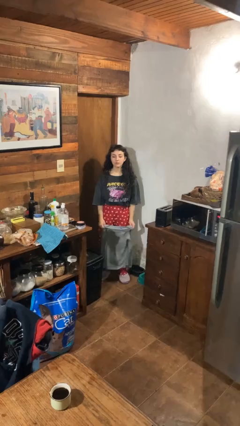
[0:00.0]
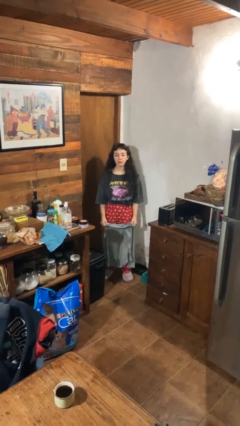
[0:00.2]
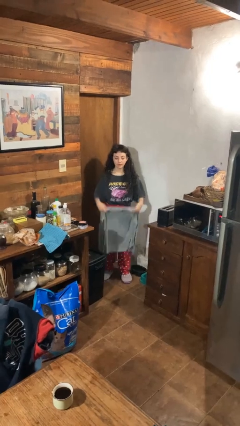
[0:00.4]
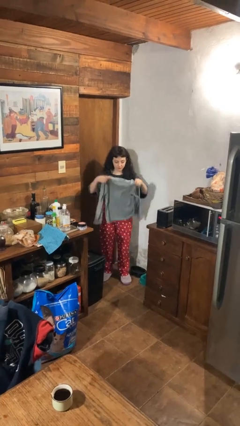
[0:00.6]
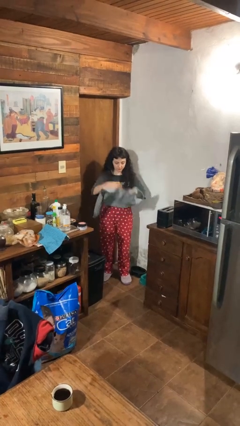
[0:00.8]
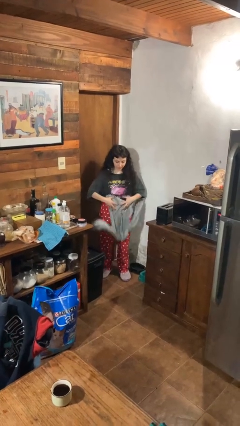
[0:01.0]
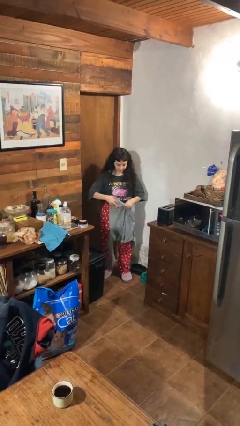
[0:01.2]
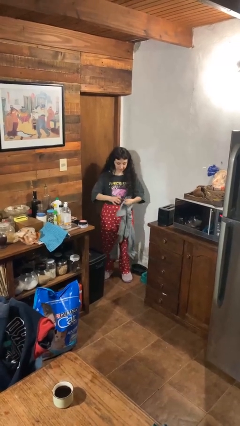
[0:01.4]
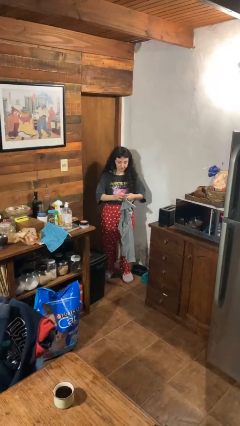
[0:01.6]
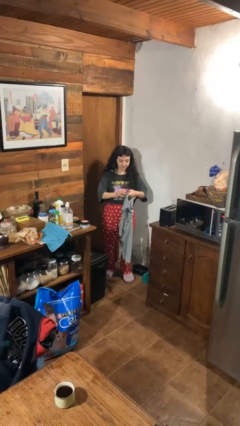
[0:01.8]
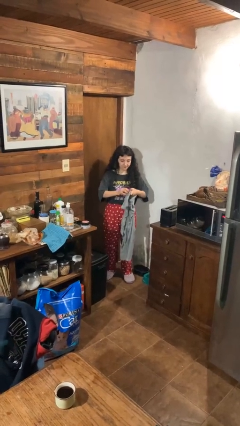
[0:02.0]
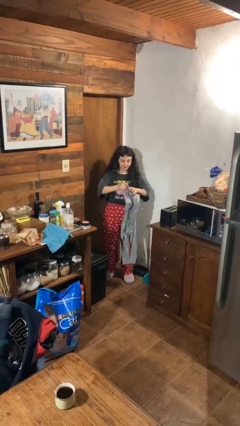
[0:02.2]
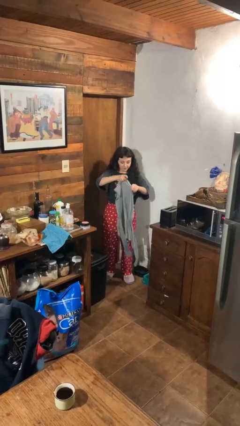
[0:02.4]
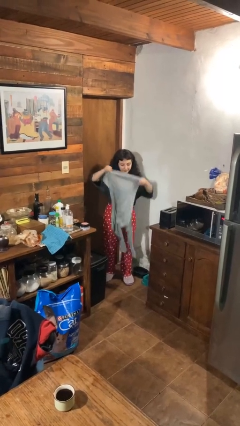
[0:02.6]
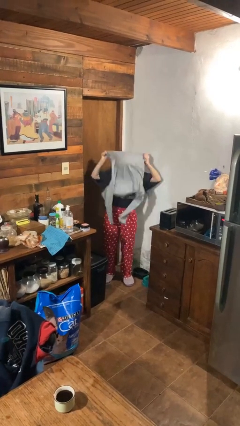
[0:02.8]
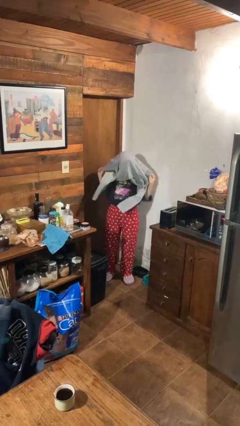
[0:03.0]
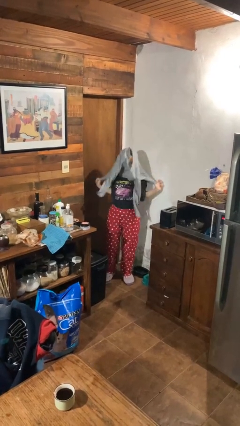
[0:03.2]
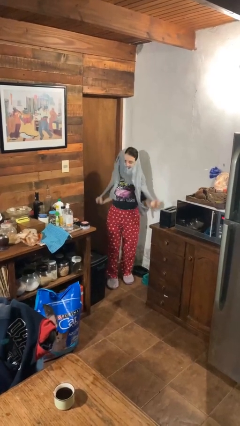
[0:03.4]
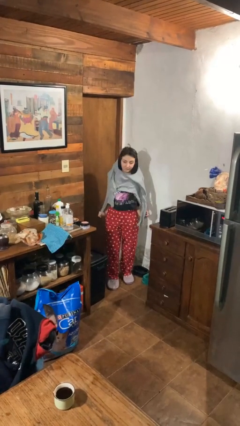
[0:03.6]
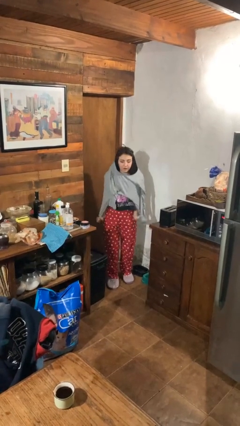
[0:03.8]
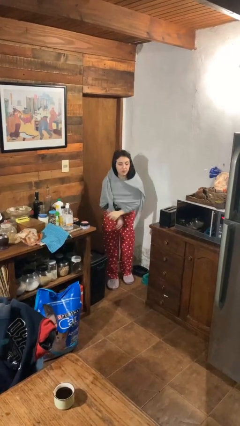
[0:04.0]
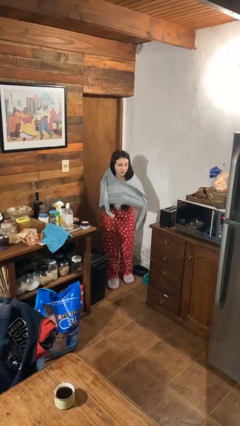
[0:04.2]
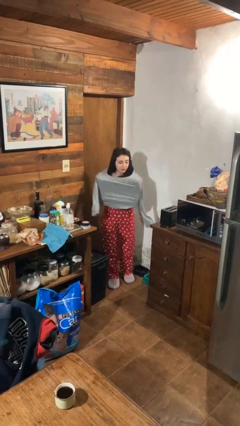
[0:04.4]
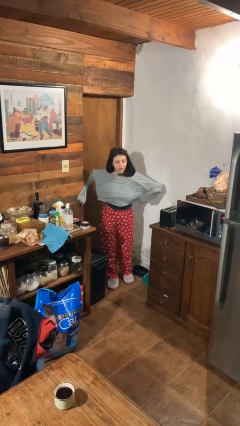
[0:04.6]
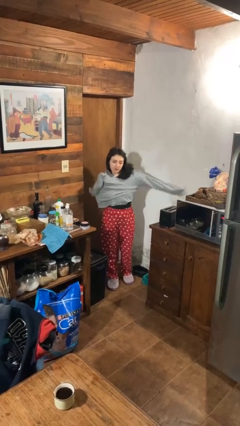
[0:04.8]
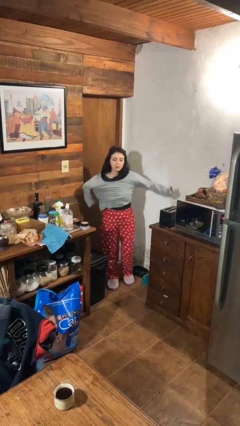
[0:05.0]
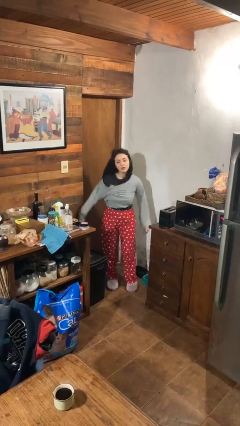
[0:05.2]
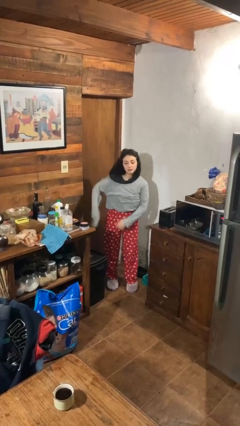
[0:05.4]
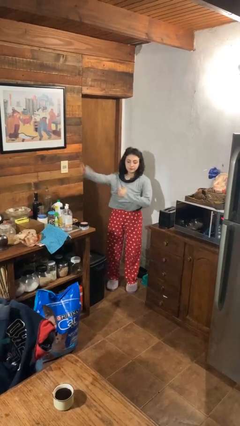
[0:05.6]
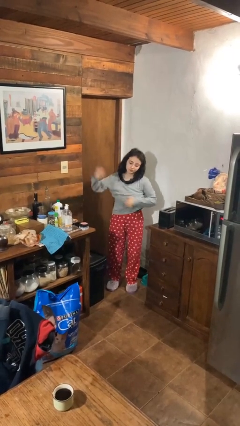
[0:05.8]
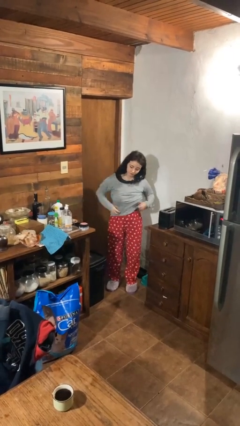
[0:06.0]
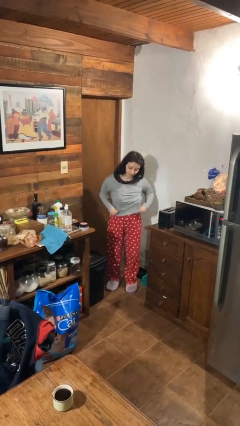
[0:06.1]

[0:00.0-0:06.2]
person puts on shirt

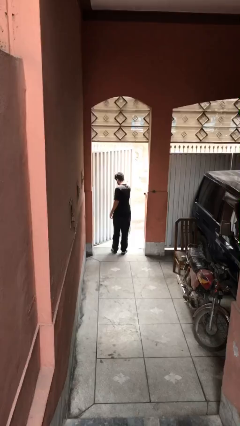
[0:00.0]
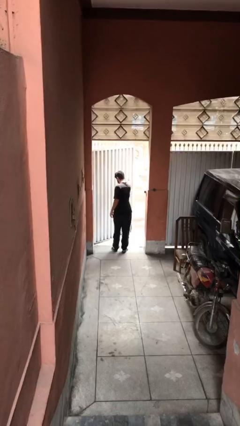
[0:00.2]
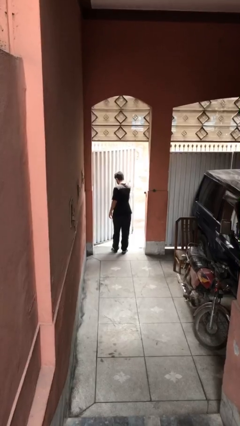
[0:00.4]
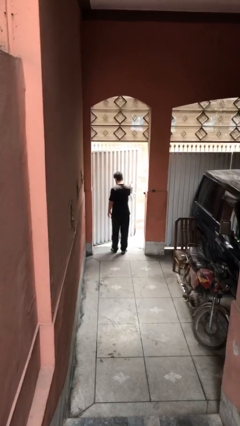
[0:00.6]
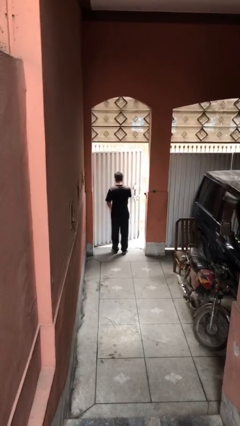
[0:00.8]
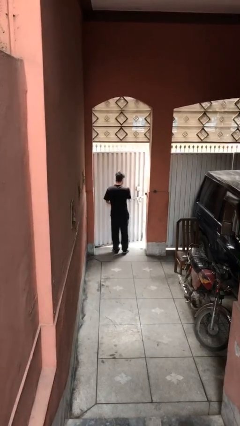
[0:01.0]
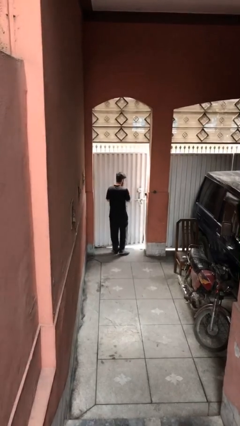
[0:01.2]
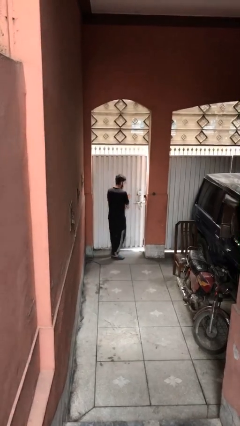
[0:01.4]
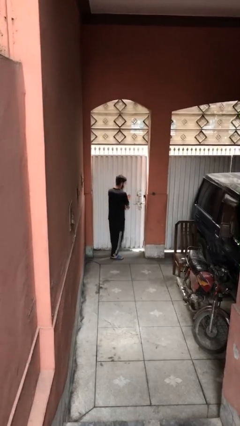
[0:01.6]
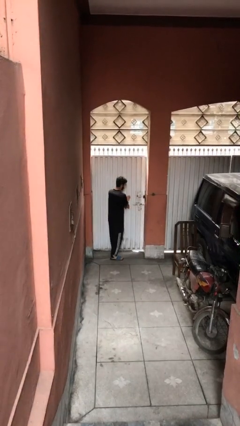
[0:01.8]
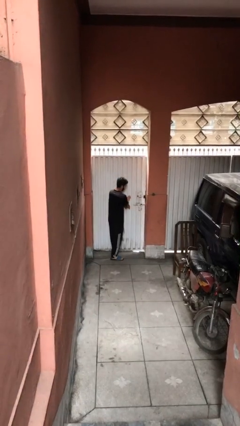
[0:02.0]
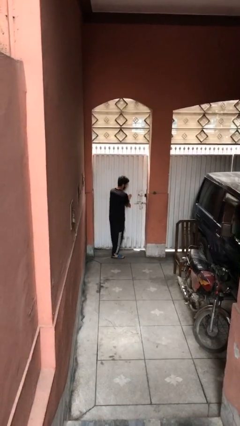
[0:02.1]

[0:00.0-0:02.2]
person closes facility door

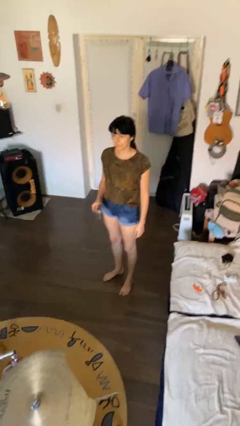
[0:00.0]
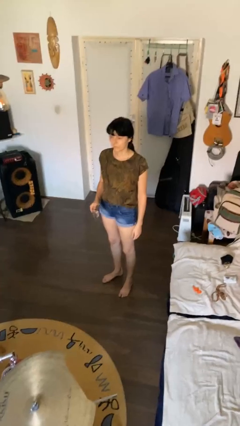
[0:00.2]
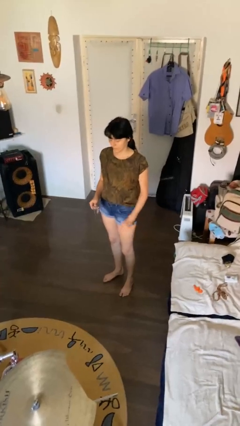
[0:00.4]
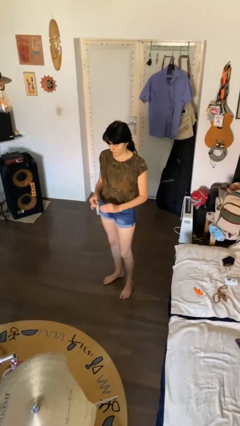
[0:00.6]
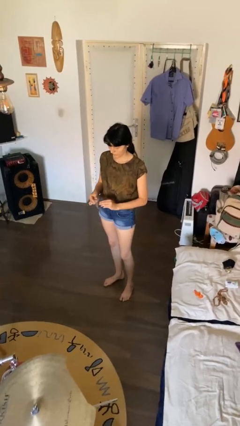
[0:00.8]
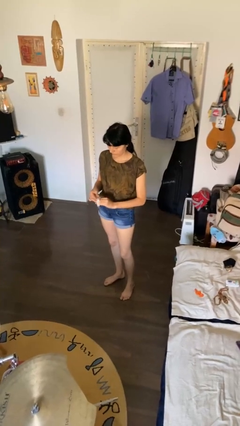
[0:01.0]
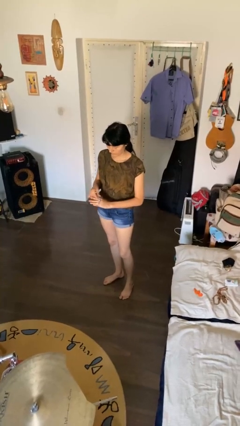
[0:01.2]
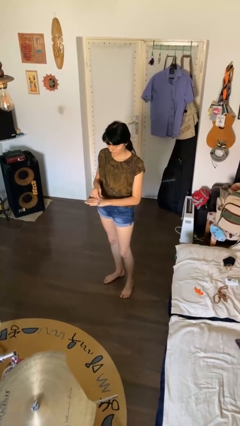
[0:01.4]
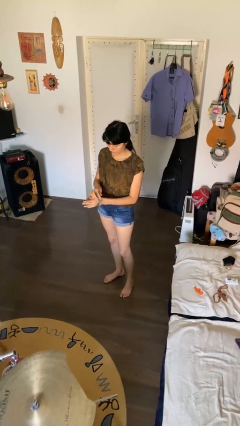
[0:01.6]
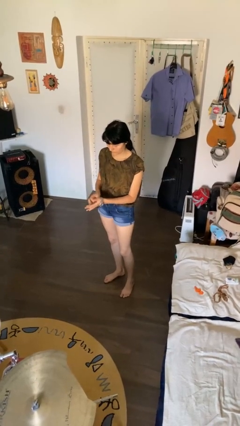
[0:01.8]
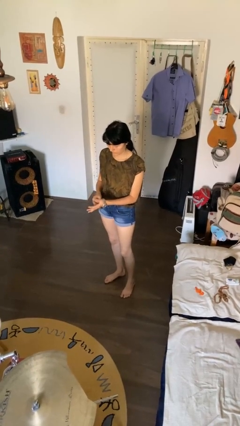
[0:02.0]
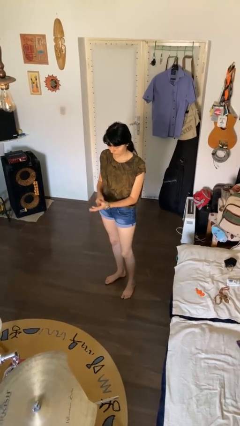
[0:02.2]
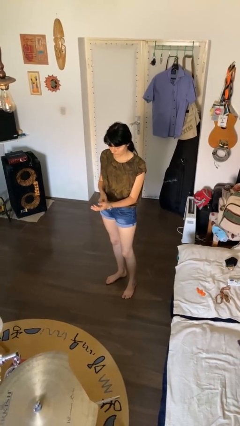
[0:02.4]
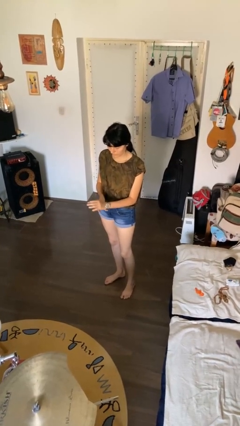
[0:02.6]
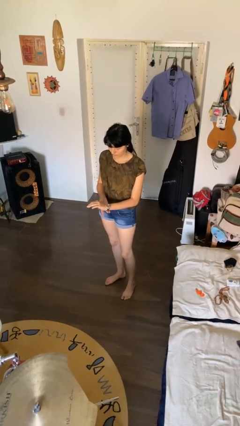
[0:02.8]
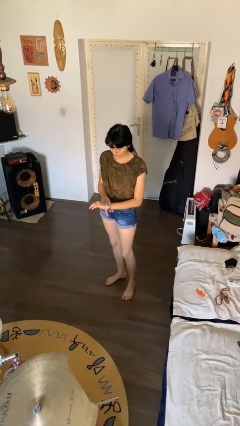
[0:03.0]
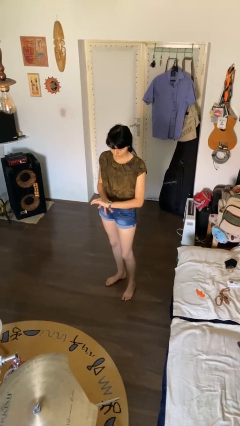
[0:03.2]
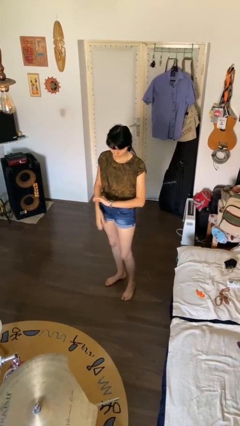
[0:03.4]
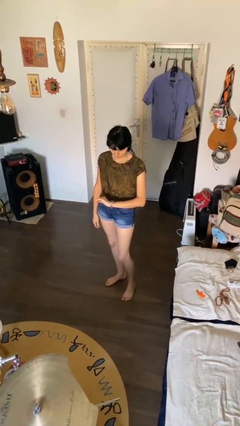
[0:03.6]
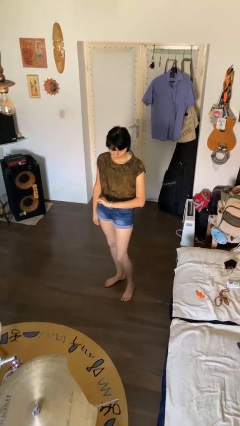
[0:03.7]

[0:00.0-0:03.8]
person puts on wristwatch

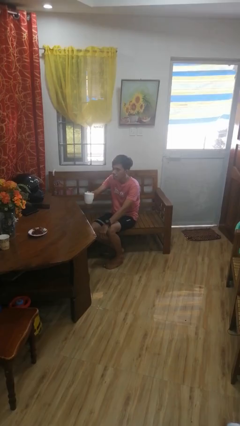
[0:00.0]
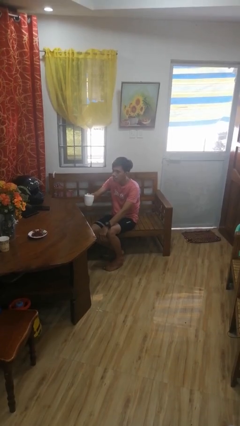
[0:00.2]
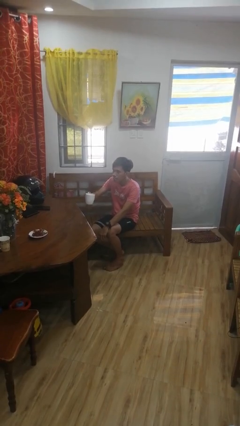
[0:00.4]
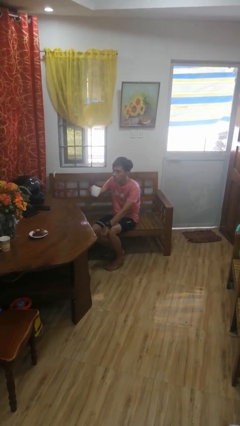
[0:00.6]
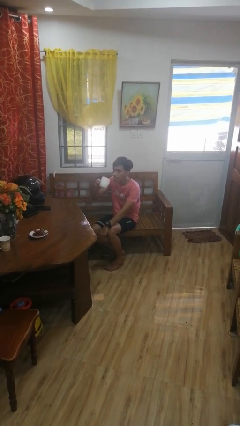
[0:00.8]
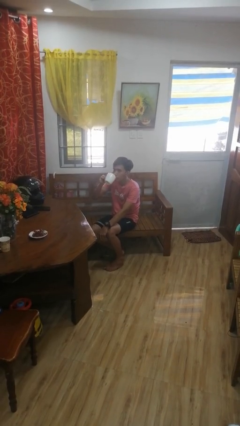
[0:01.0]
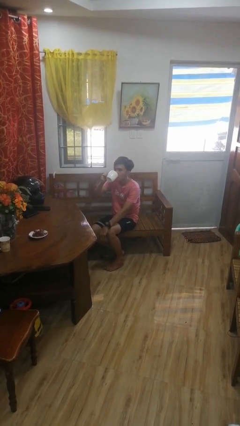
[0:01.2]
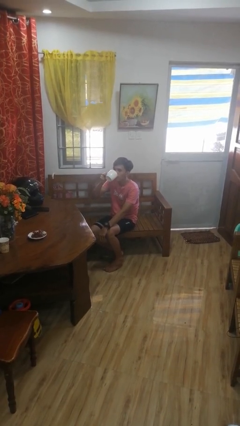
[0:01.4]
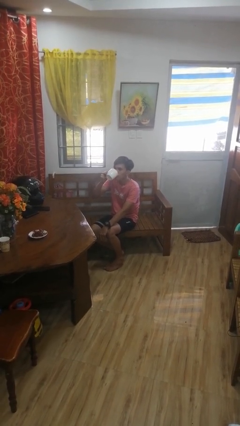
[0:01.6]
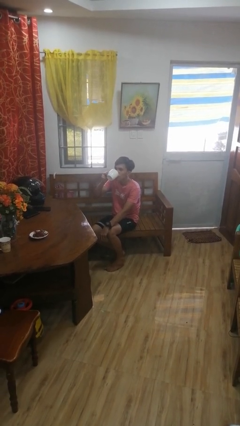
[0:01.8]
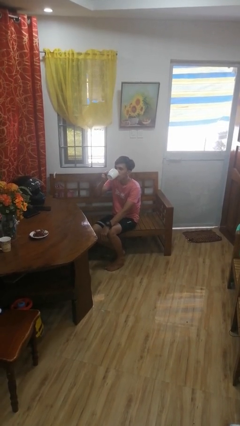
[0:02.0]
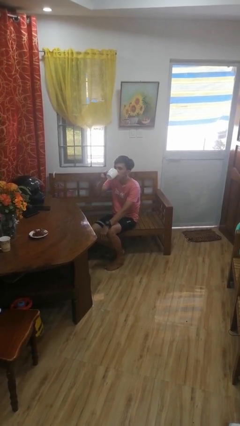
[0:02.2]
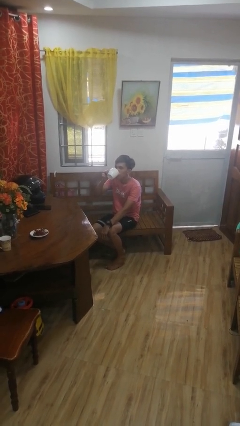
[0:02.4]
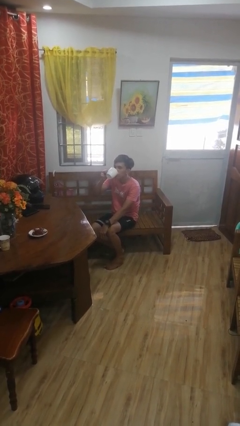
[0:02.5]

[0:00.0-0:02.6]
person drinks from mug

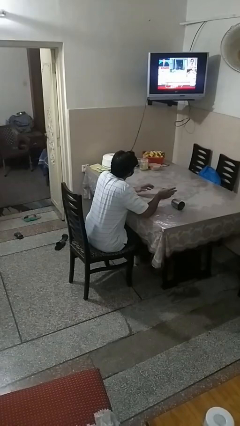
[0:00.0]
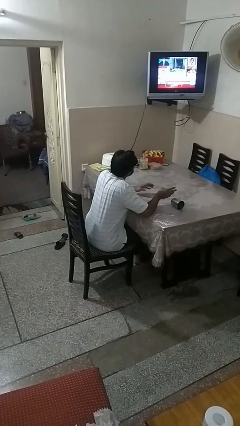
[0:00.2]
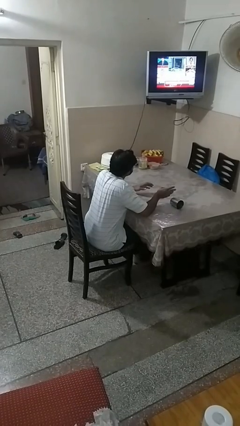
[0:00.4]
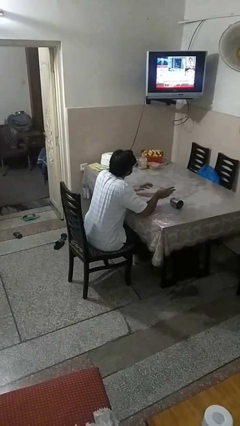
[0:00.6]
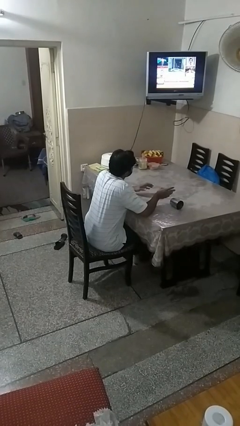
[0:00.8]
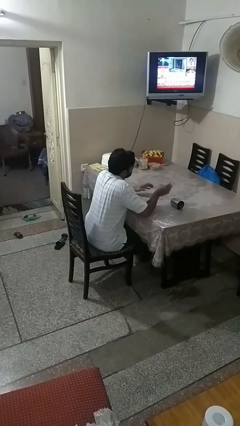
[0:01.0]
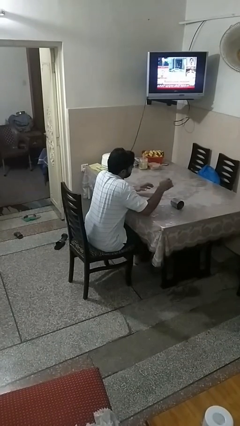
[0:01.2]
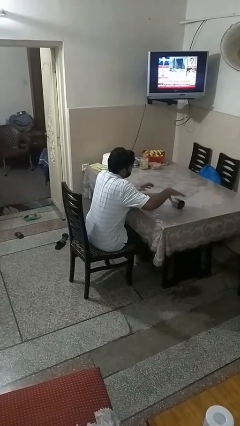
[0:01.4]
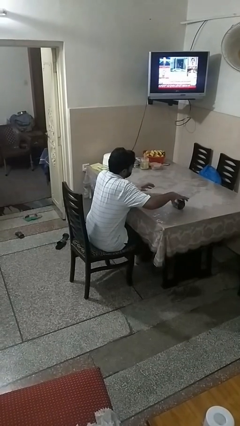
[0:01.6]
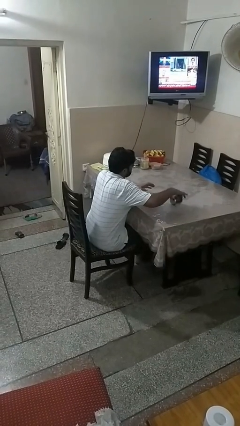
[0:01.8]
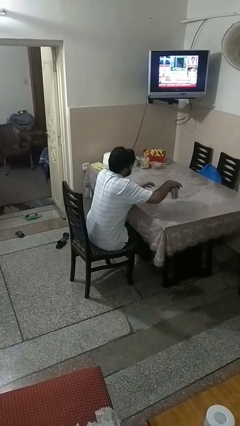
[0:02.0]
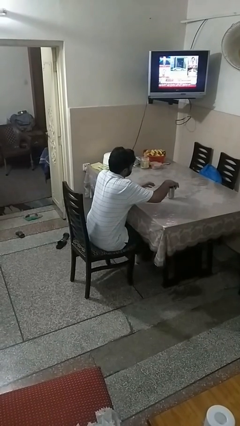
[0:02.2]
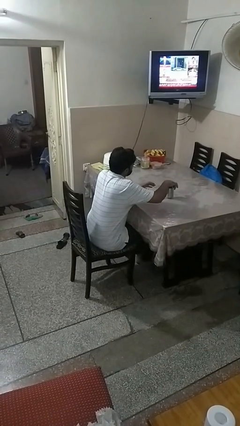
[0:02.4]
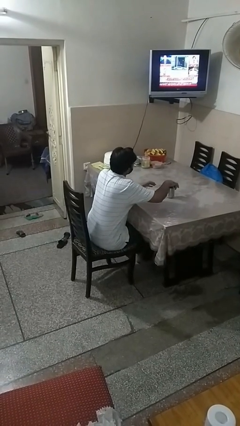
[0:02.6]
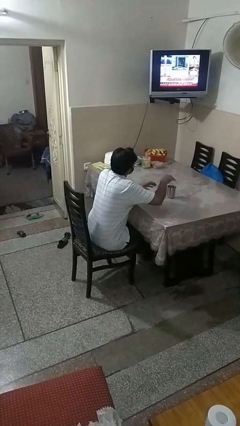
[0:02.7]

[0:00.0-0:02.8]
person sets upright glass
